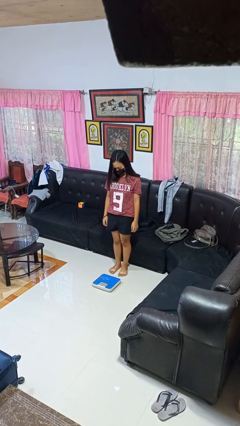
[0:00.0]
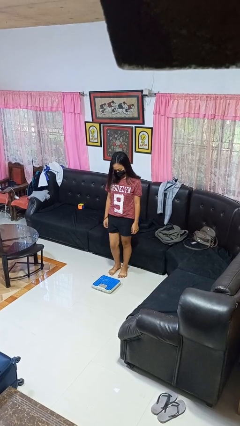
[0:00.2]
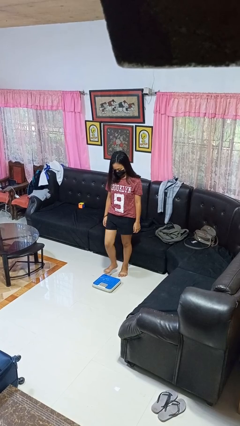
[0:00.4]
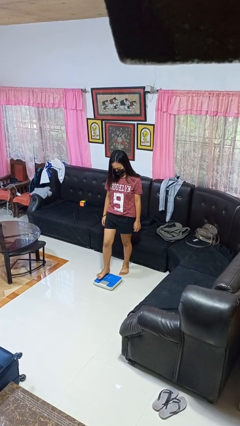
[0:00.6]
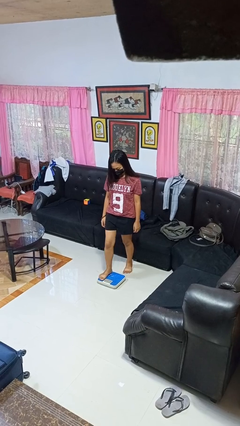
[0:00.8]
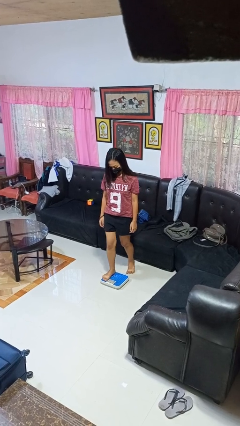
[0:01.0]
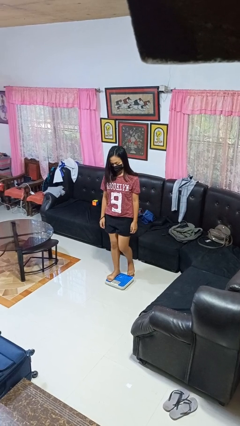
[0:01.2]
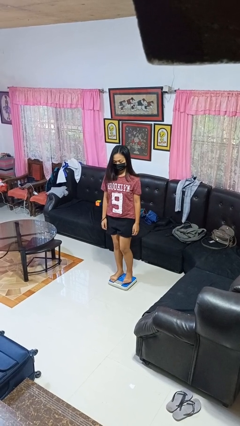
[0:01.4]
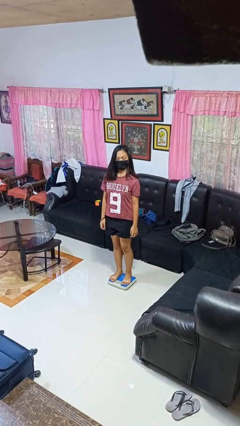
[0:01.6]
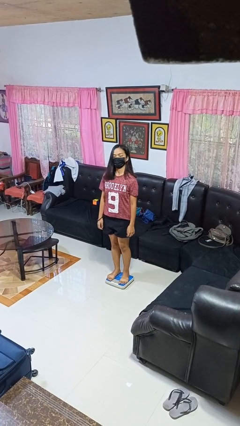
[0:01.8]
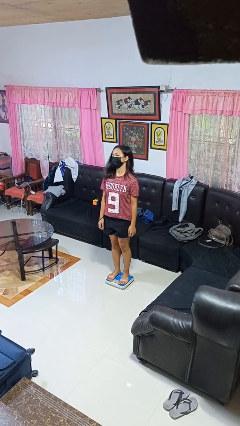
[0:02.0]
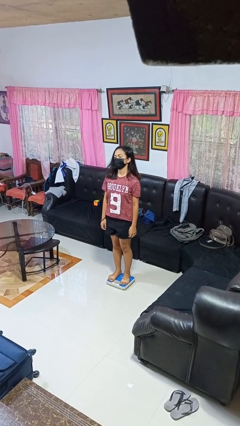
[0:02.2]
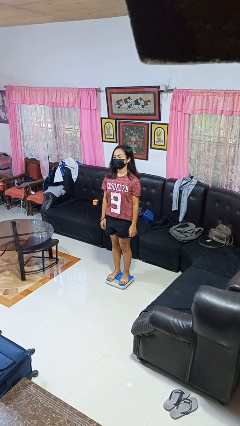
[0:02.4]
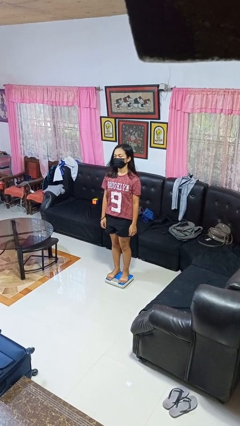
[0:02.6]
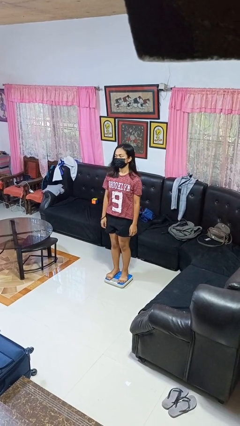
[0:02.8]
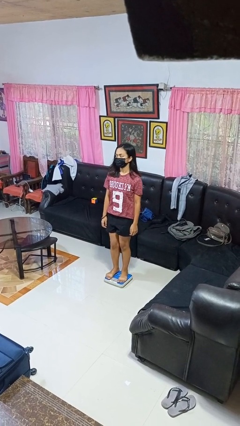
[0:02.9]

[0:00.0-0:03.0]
person uses bodyweight scale

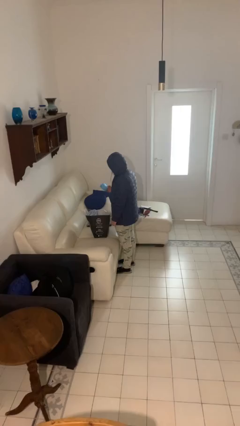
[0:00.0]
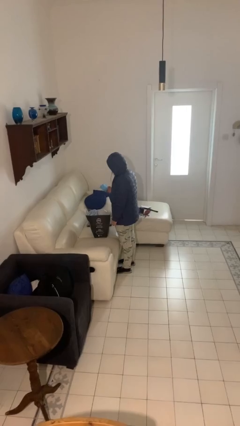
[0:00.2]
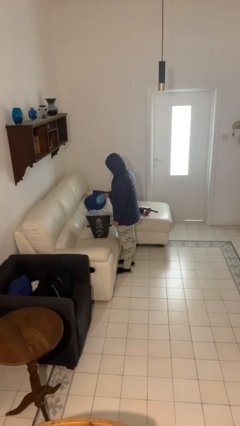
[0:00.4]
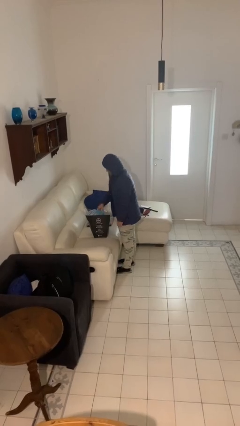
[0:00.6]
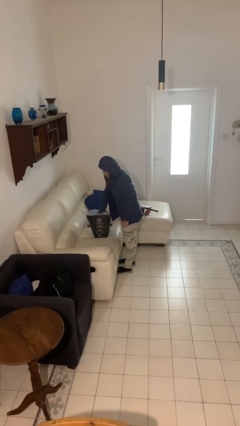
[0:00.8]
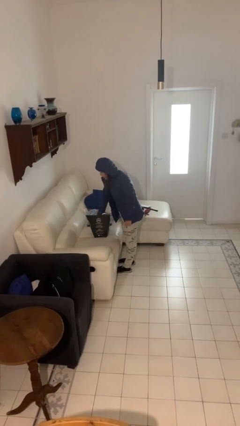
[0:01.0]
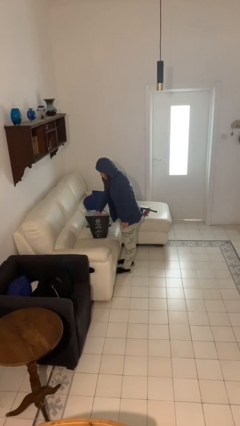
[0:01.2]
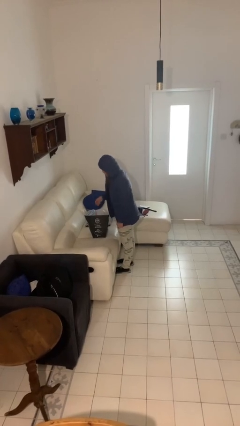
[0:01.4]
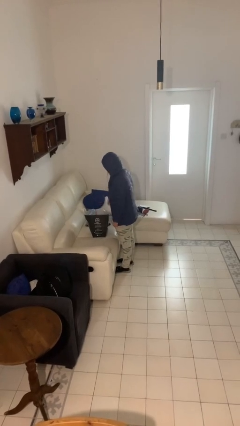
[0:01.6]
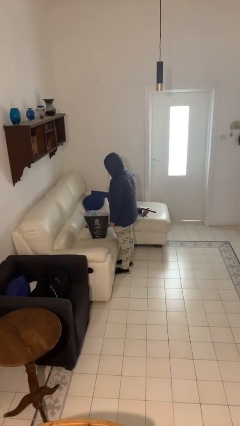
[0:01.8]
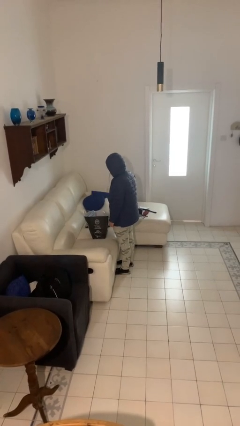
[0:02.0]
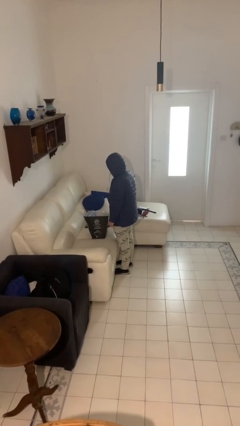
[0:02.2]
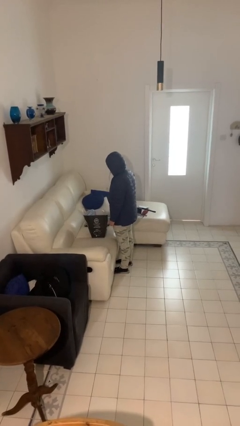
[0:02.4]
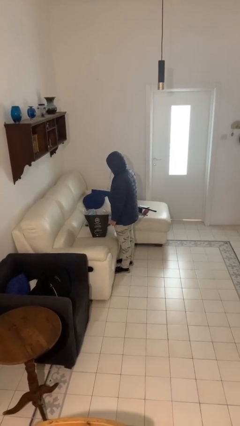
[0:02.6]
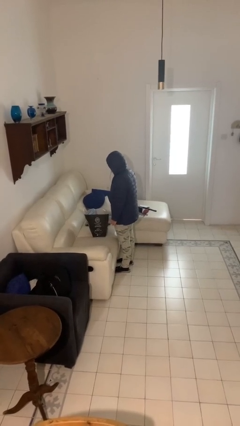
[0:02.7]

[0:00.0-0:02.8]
person puts object into bag

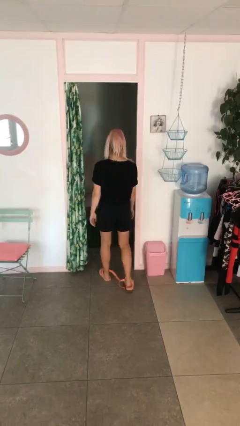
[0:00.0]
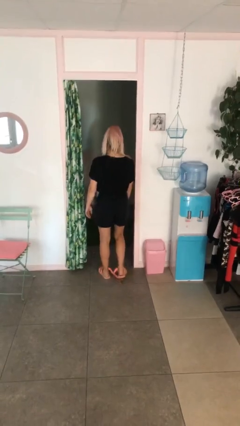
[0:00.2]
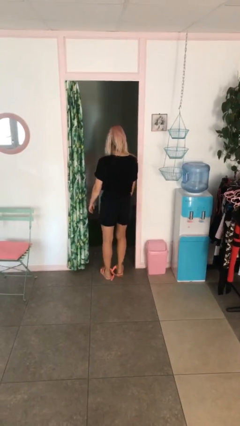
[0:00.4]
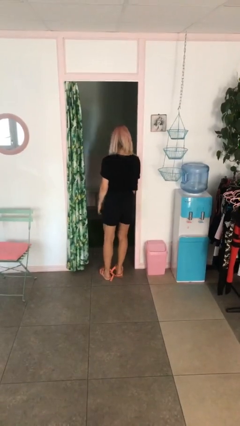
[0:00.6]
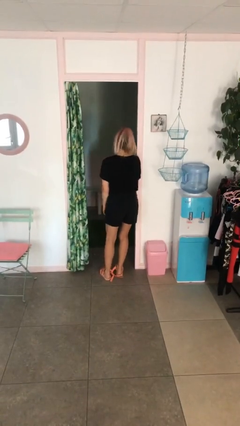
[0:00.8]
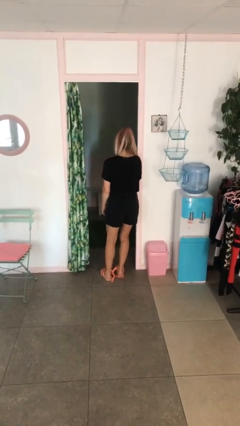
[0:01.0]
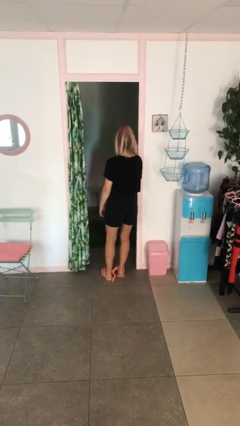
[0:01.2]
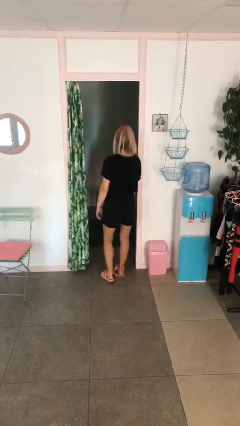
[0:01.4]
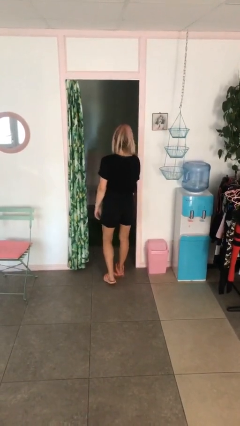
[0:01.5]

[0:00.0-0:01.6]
person bumps into wall

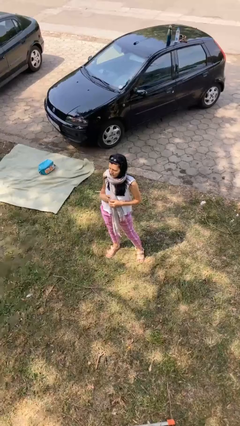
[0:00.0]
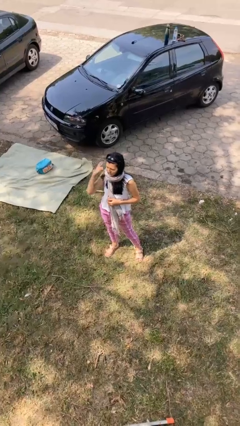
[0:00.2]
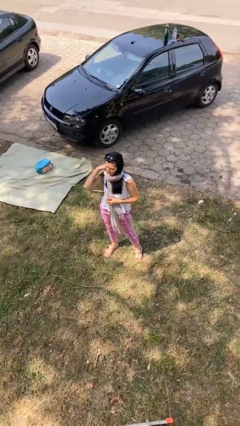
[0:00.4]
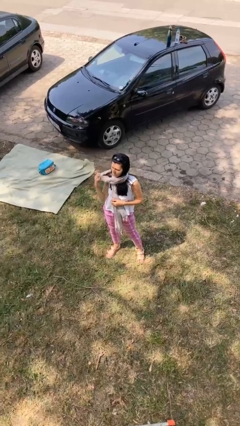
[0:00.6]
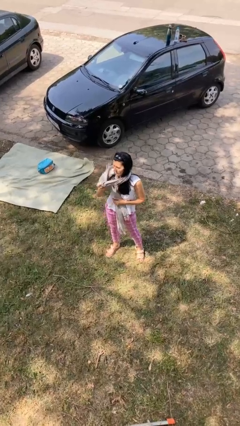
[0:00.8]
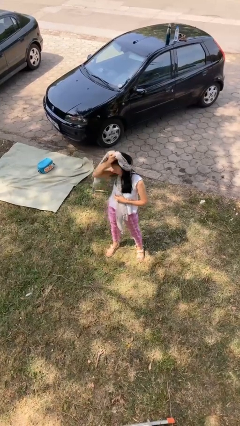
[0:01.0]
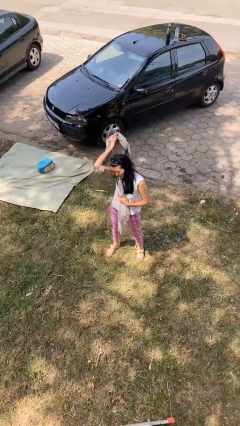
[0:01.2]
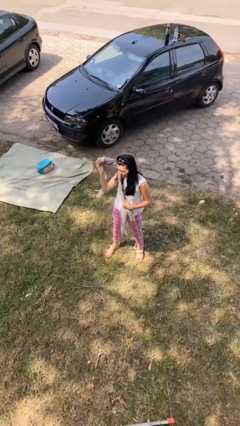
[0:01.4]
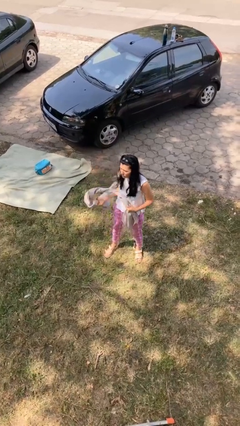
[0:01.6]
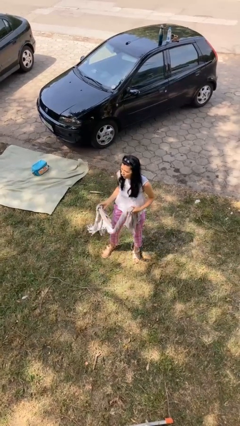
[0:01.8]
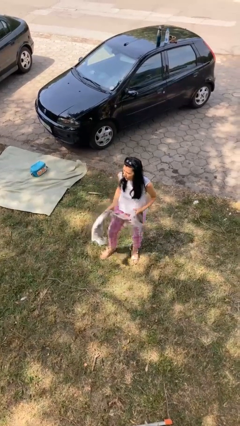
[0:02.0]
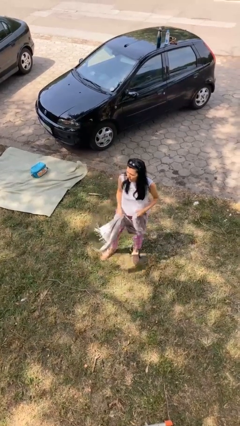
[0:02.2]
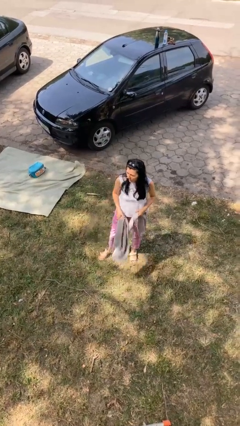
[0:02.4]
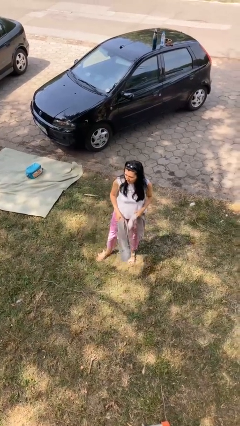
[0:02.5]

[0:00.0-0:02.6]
person takes off scarf

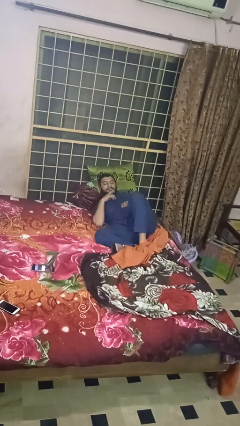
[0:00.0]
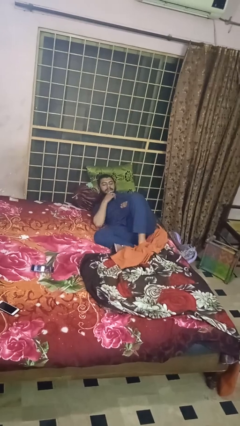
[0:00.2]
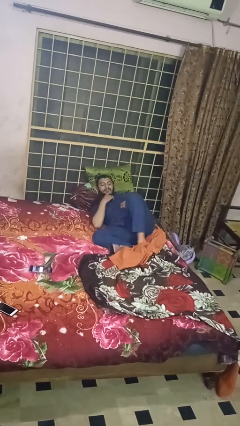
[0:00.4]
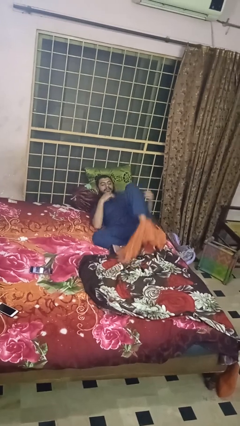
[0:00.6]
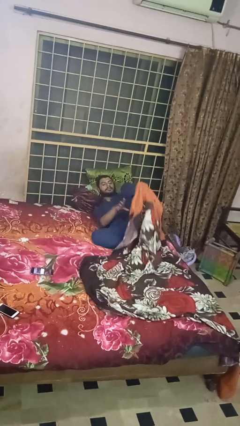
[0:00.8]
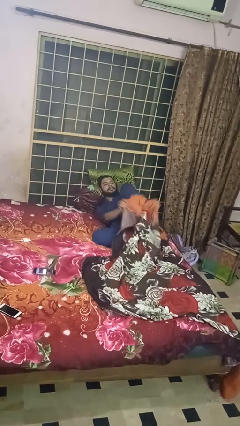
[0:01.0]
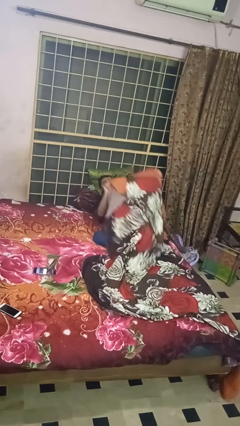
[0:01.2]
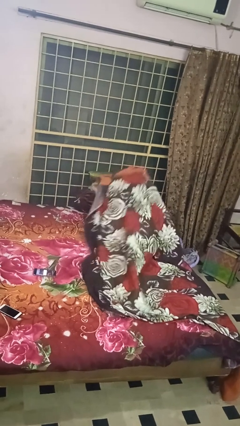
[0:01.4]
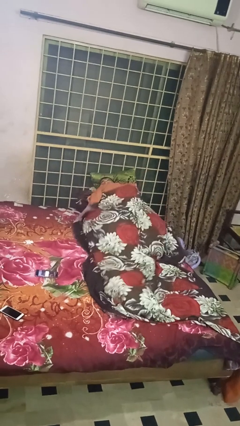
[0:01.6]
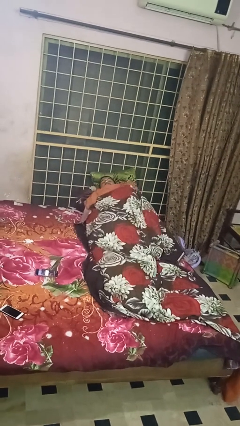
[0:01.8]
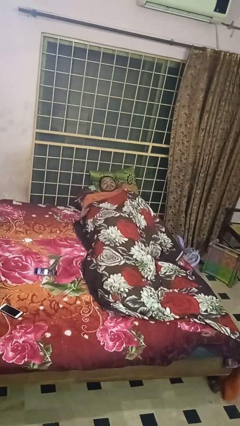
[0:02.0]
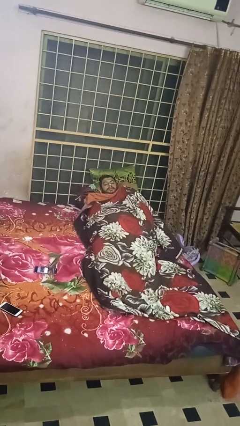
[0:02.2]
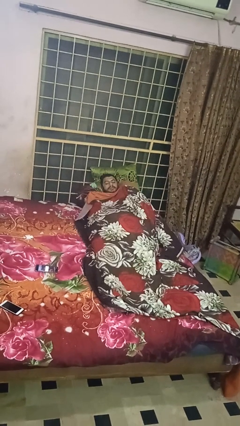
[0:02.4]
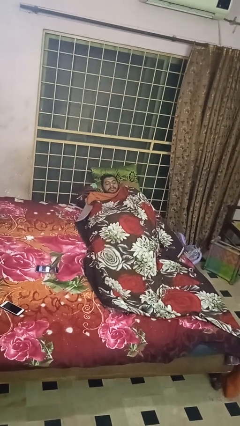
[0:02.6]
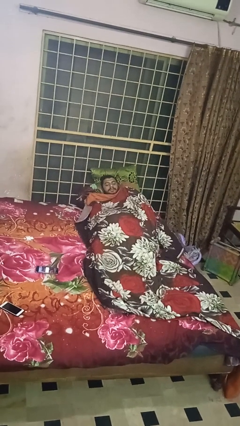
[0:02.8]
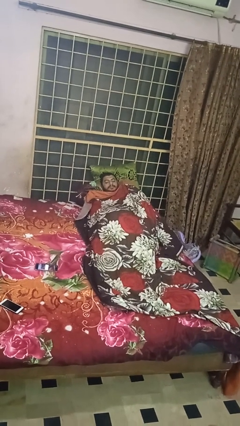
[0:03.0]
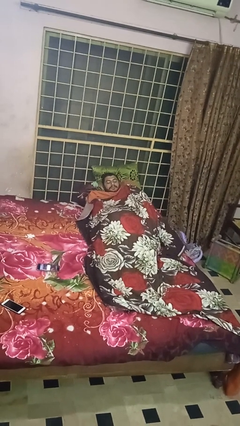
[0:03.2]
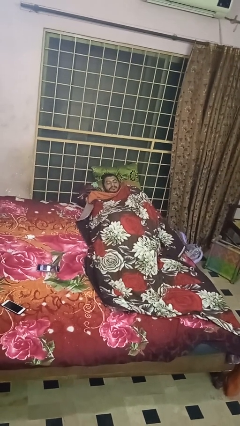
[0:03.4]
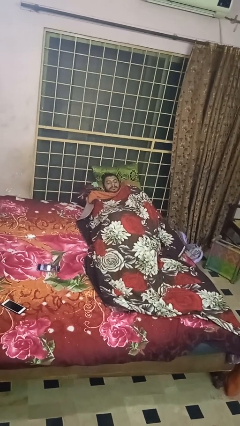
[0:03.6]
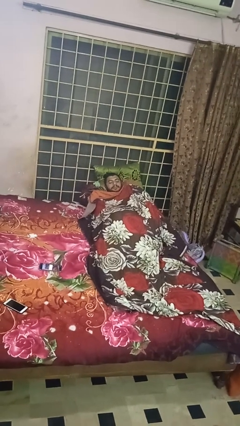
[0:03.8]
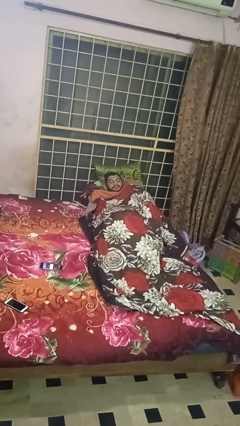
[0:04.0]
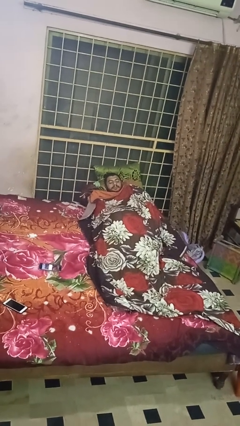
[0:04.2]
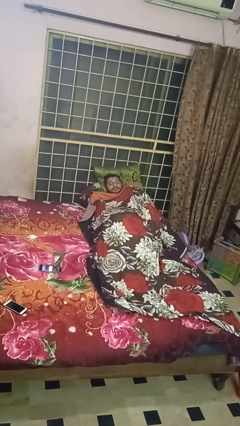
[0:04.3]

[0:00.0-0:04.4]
person covers with bedsheets

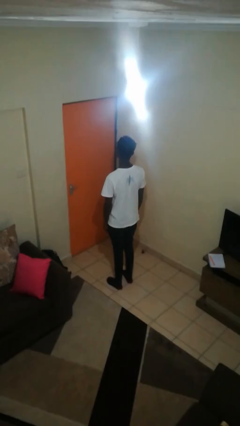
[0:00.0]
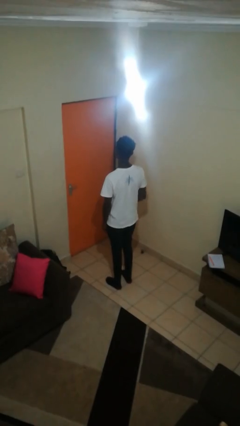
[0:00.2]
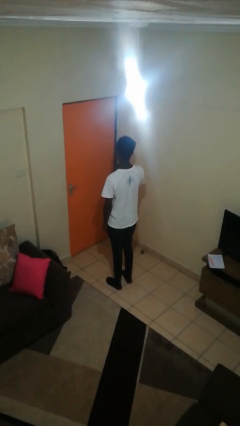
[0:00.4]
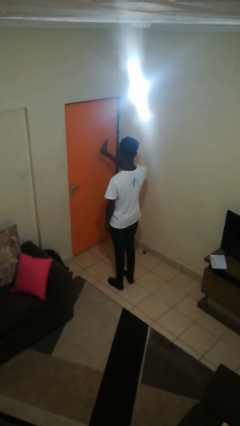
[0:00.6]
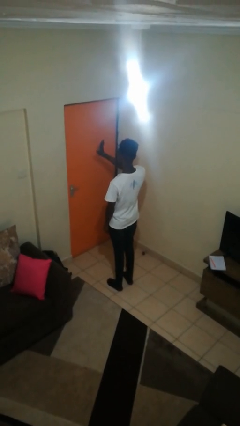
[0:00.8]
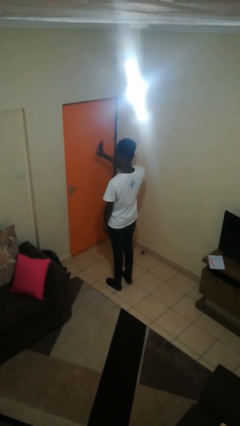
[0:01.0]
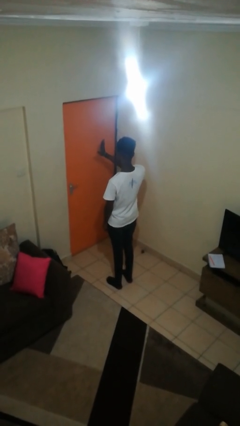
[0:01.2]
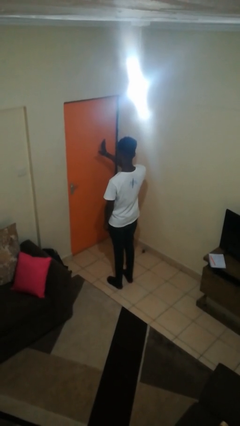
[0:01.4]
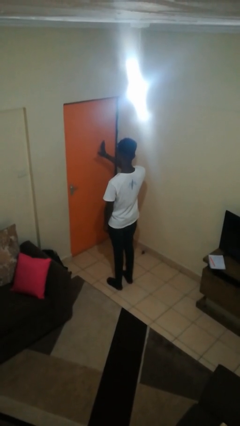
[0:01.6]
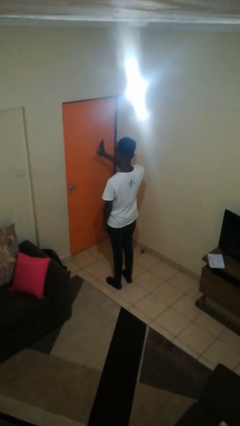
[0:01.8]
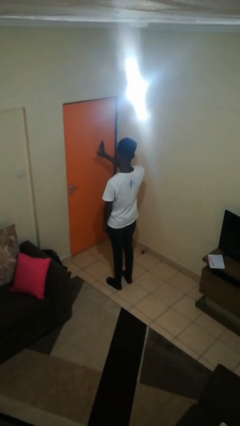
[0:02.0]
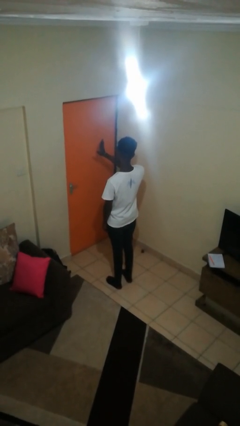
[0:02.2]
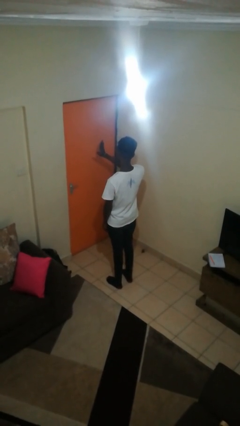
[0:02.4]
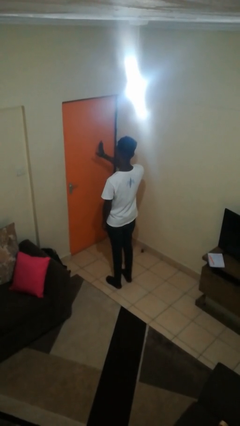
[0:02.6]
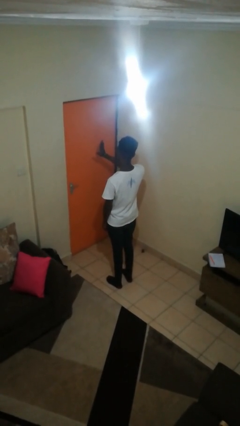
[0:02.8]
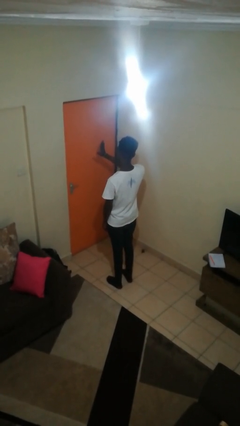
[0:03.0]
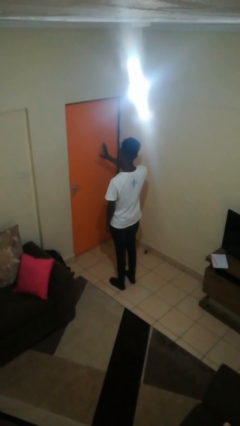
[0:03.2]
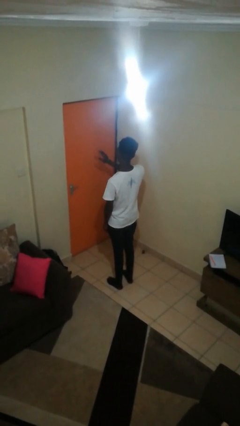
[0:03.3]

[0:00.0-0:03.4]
person gestures stop
